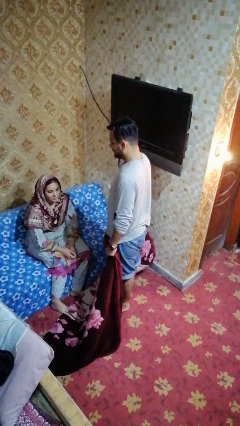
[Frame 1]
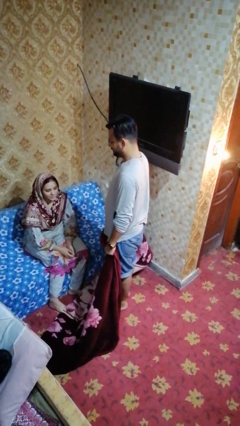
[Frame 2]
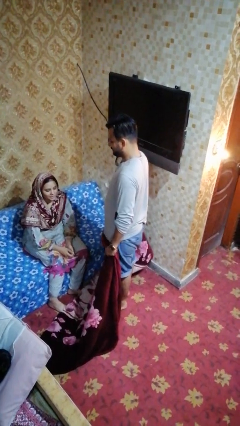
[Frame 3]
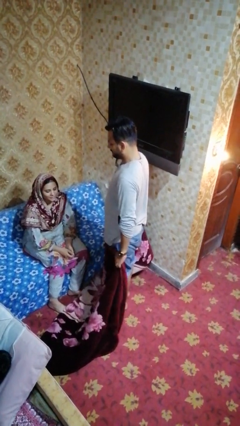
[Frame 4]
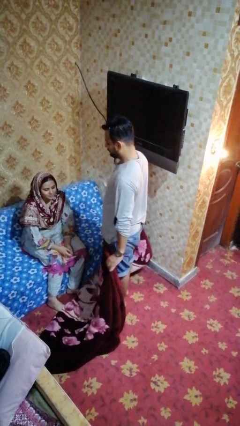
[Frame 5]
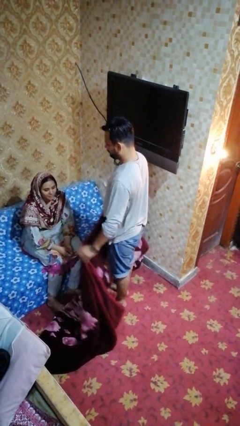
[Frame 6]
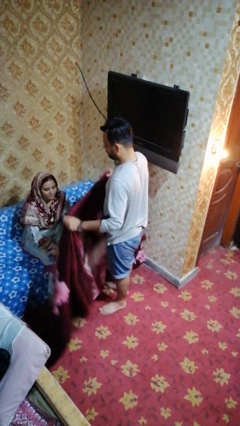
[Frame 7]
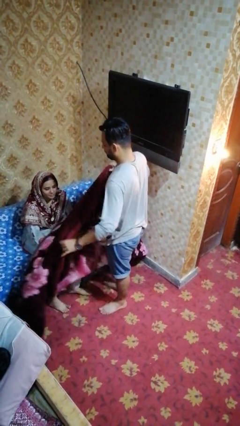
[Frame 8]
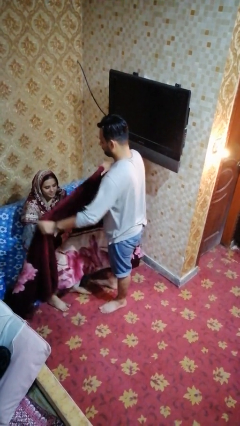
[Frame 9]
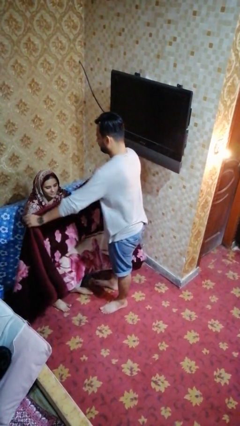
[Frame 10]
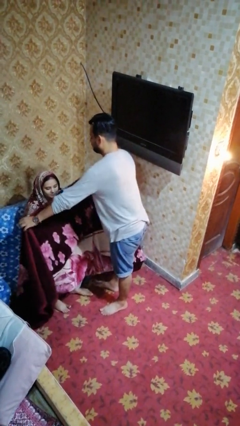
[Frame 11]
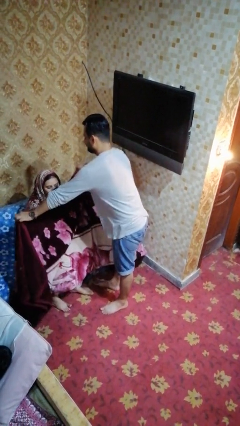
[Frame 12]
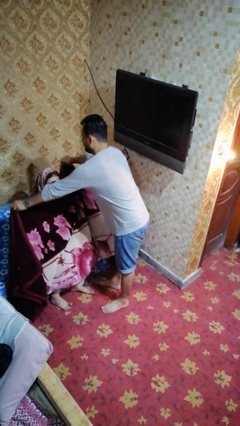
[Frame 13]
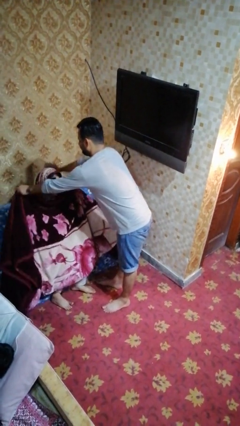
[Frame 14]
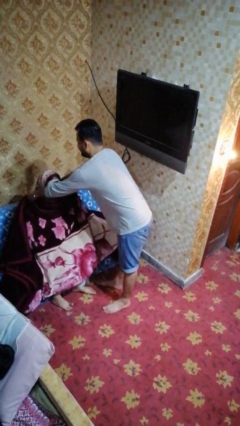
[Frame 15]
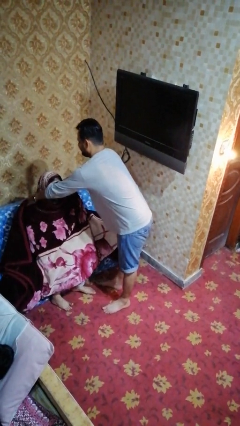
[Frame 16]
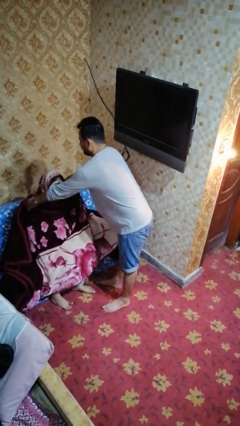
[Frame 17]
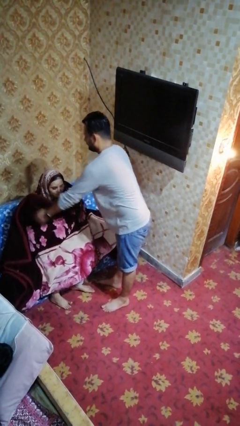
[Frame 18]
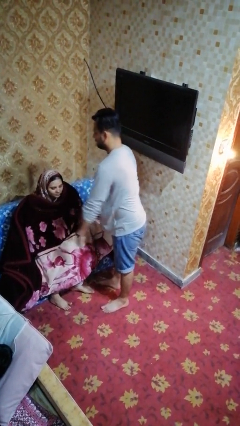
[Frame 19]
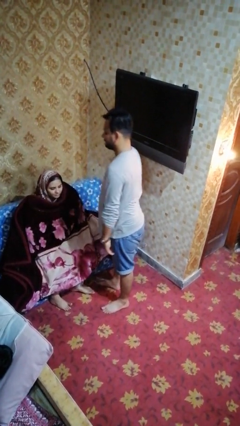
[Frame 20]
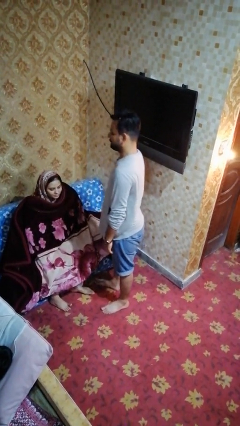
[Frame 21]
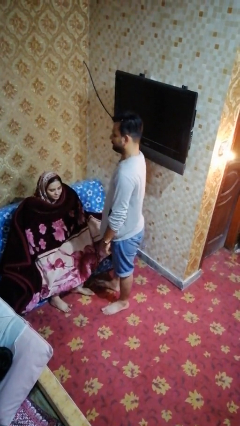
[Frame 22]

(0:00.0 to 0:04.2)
person covers friend with blanket

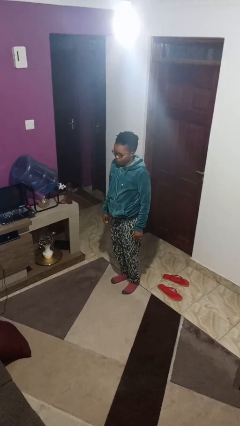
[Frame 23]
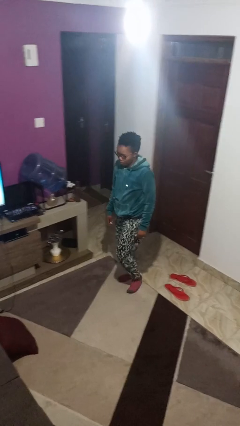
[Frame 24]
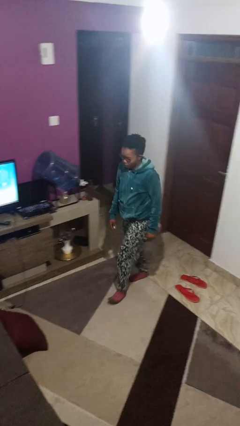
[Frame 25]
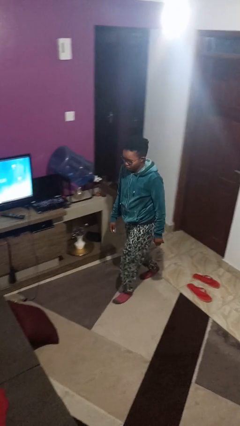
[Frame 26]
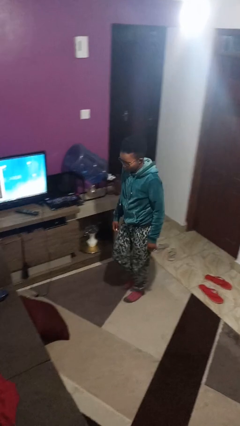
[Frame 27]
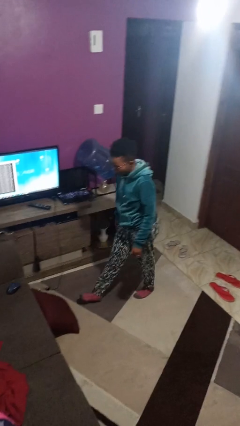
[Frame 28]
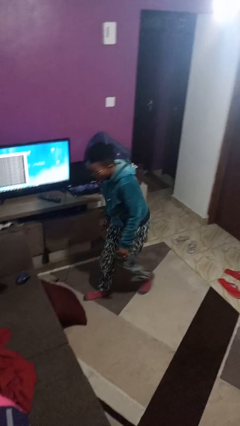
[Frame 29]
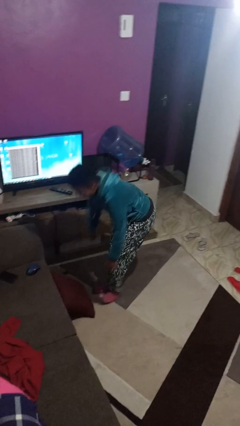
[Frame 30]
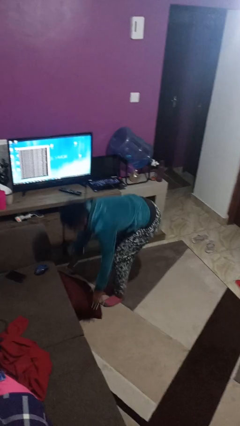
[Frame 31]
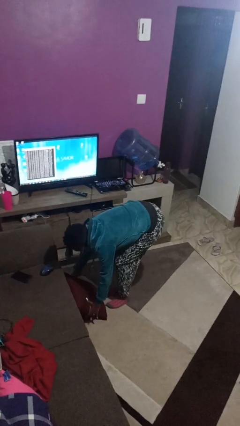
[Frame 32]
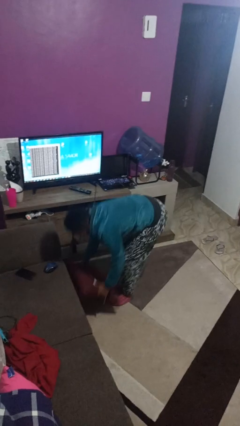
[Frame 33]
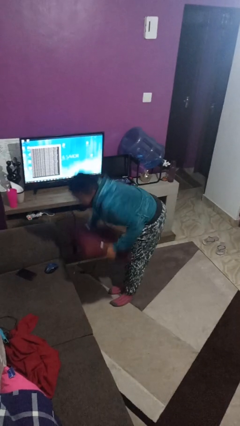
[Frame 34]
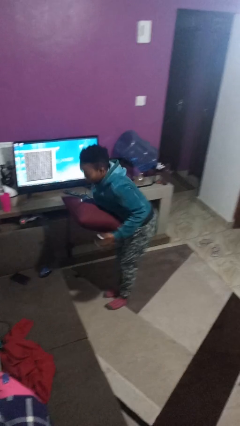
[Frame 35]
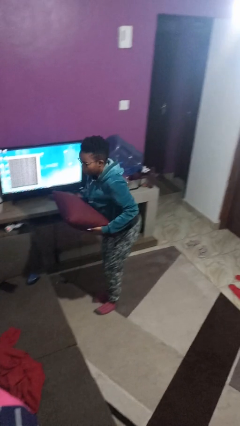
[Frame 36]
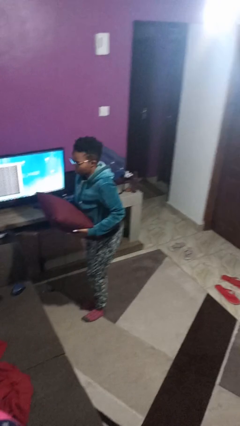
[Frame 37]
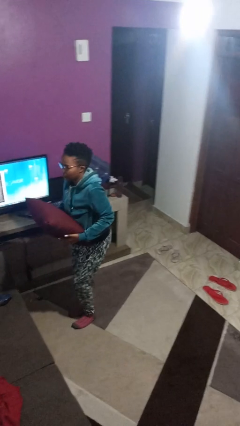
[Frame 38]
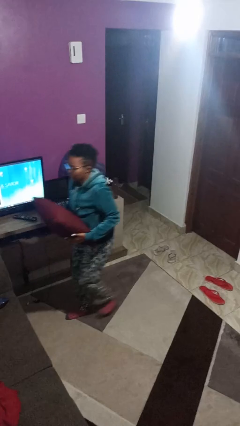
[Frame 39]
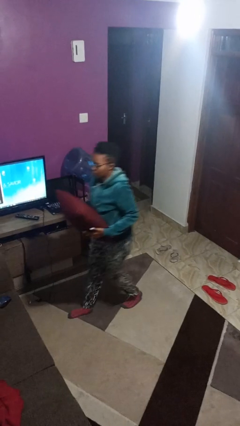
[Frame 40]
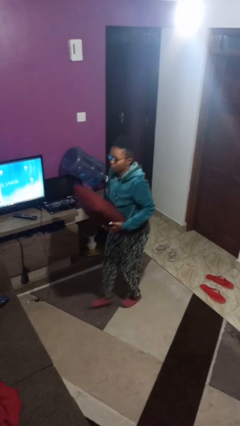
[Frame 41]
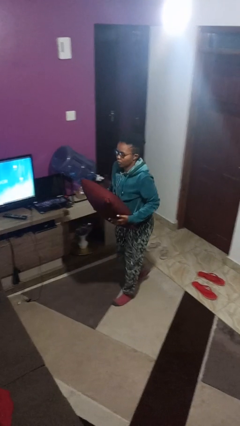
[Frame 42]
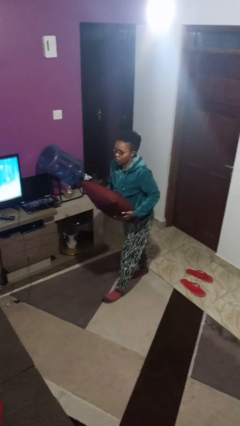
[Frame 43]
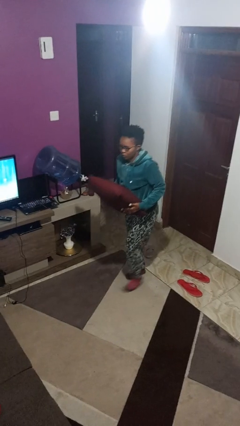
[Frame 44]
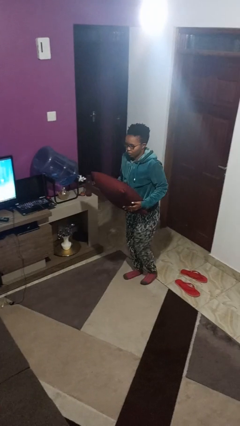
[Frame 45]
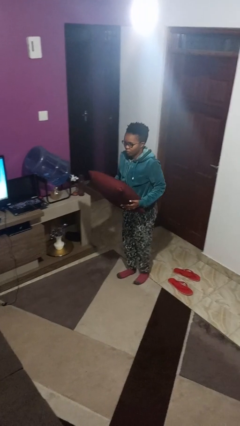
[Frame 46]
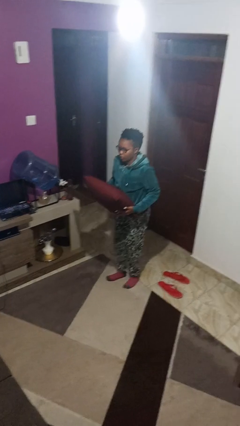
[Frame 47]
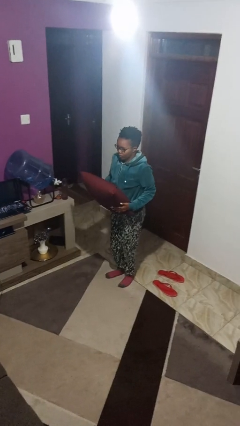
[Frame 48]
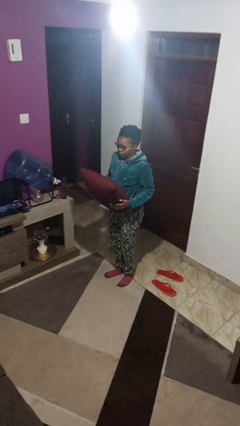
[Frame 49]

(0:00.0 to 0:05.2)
person picks up object from floor

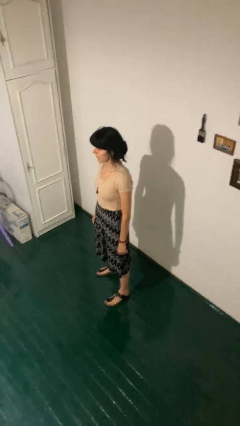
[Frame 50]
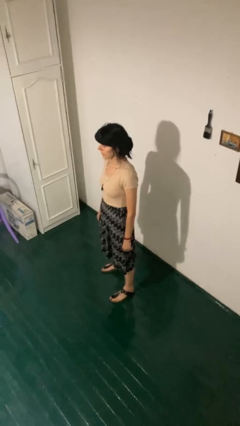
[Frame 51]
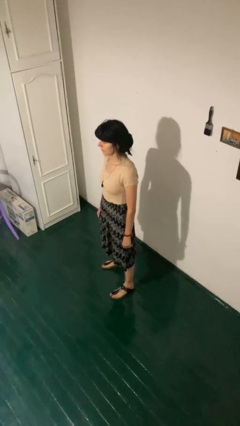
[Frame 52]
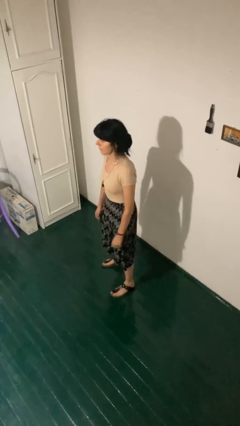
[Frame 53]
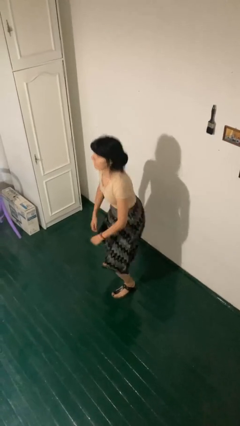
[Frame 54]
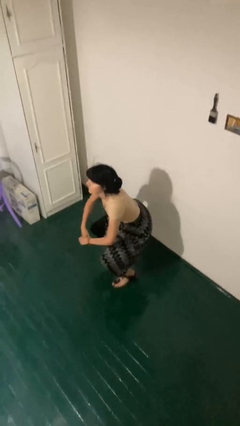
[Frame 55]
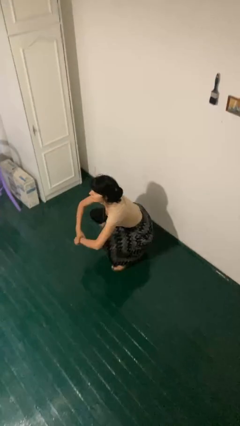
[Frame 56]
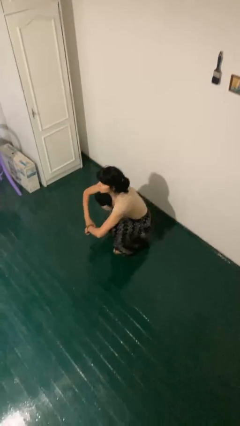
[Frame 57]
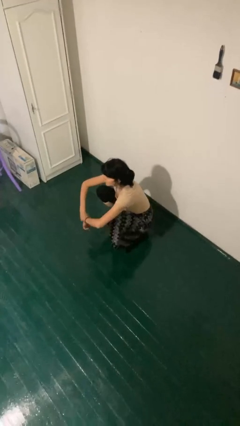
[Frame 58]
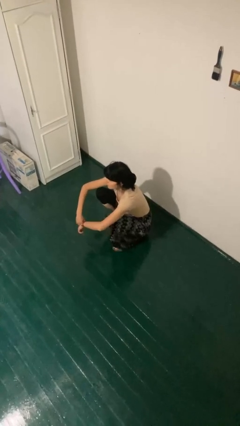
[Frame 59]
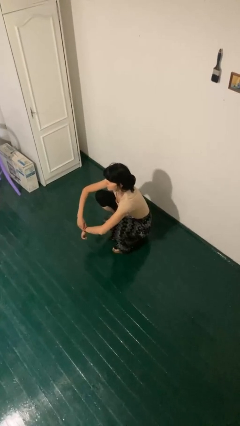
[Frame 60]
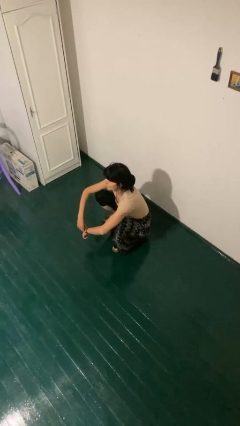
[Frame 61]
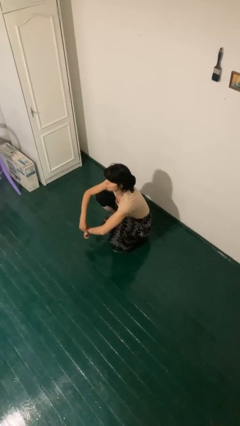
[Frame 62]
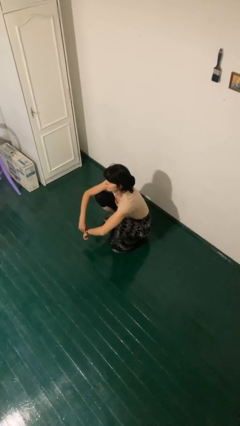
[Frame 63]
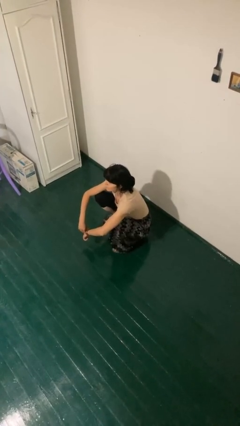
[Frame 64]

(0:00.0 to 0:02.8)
person squats

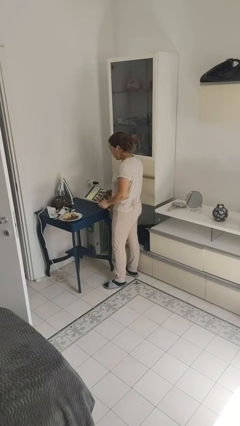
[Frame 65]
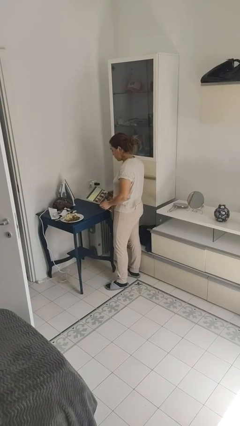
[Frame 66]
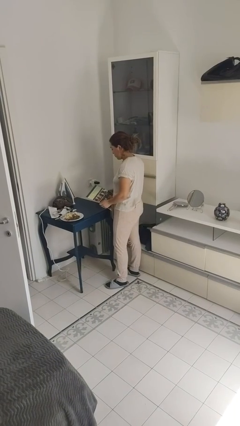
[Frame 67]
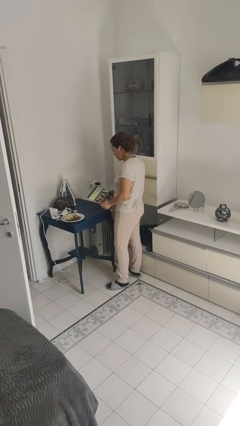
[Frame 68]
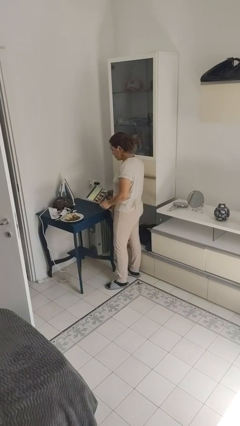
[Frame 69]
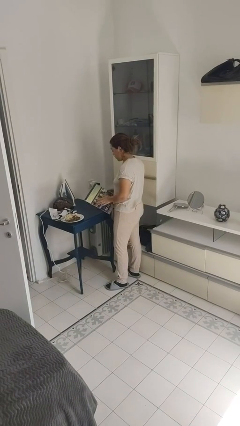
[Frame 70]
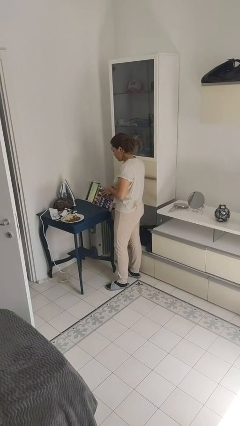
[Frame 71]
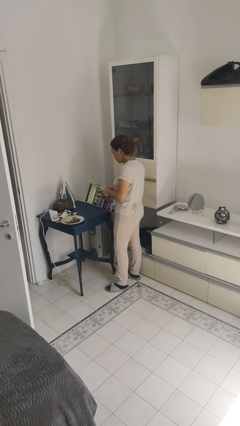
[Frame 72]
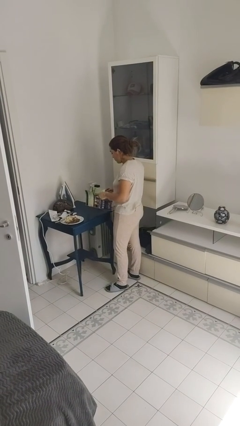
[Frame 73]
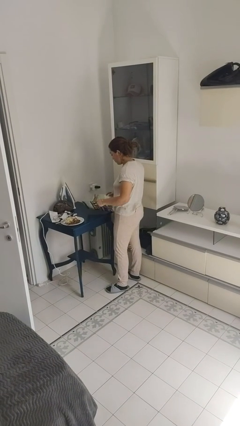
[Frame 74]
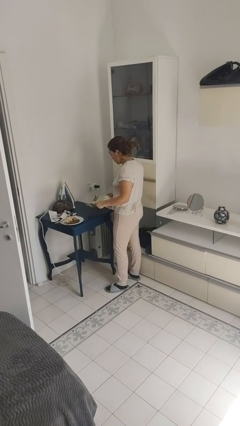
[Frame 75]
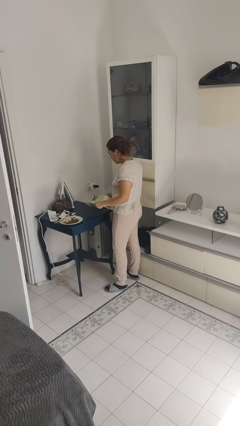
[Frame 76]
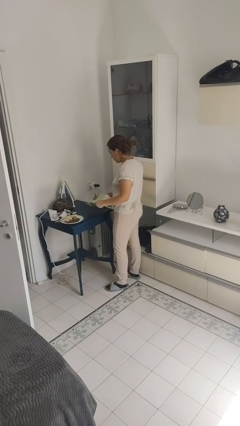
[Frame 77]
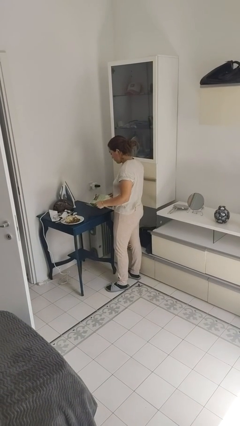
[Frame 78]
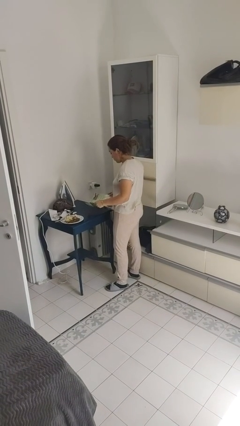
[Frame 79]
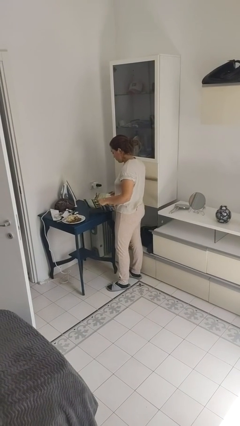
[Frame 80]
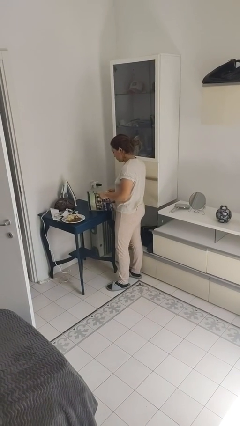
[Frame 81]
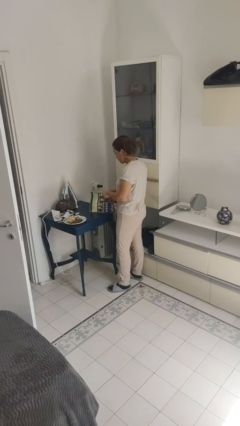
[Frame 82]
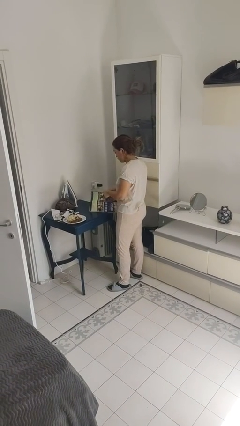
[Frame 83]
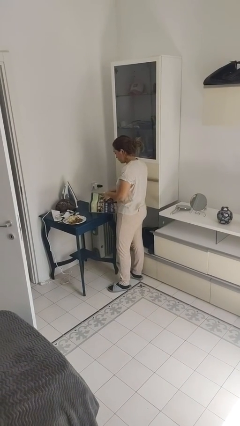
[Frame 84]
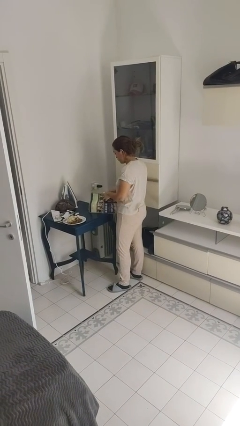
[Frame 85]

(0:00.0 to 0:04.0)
person reads magazine

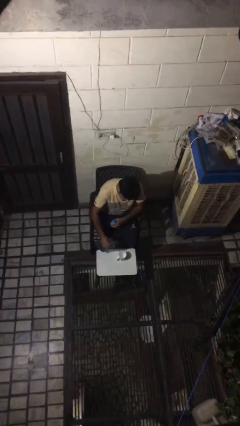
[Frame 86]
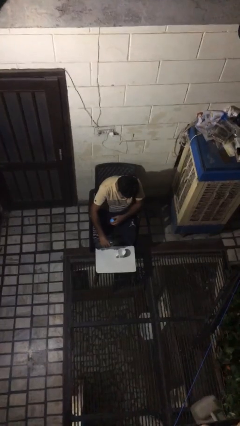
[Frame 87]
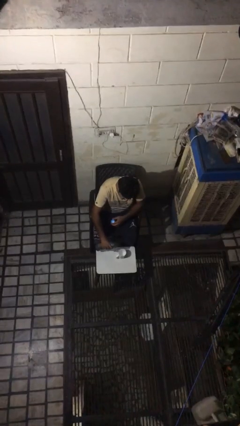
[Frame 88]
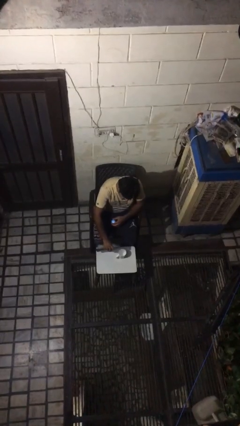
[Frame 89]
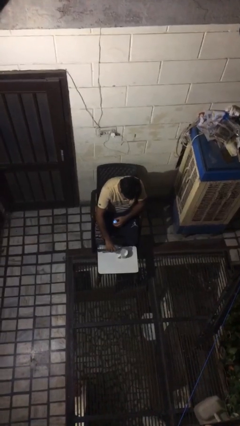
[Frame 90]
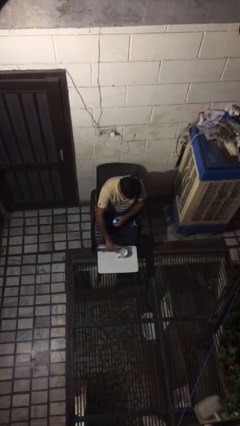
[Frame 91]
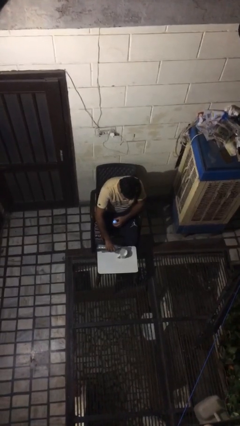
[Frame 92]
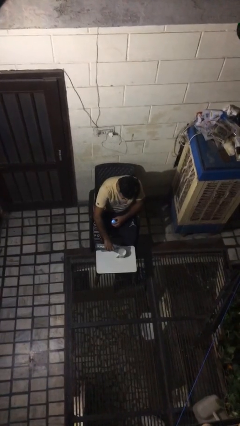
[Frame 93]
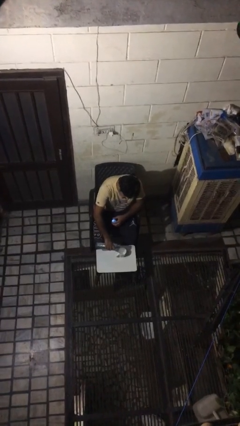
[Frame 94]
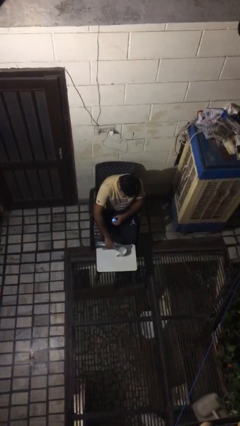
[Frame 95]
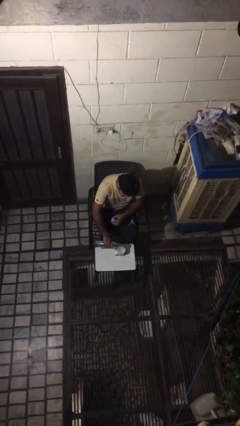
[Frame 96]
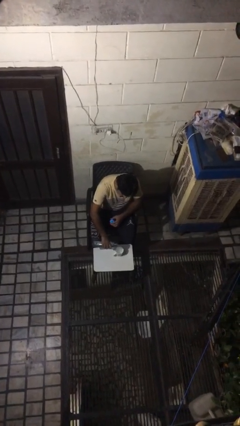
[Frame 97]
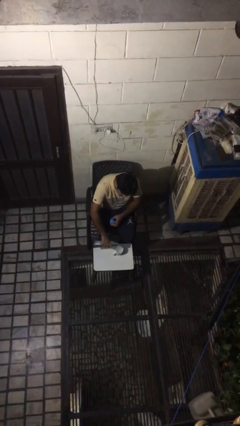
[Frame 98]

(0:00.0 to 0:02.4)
person pours liquid into cup
